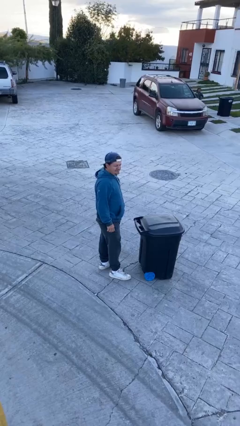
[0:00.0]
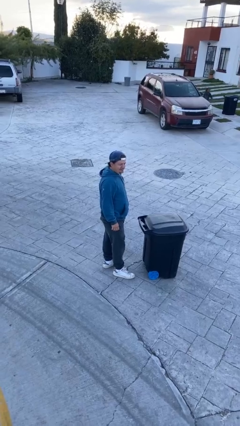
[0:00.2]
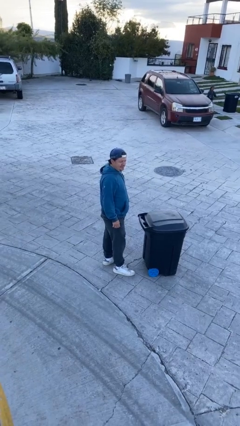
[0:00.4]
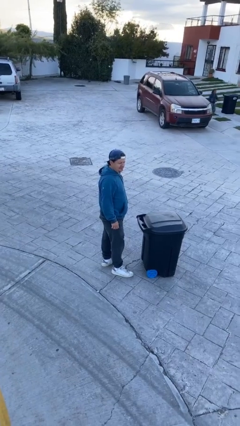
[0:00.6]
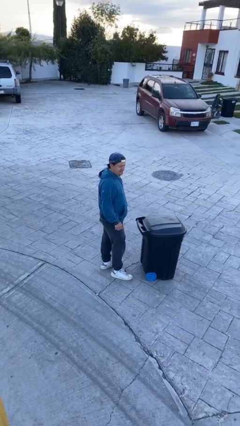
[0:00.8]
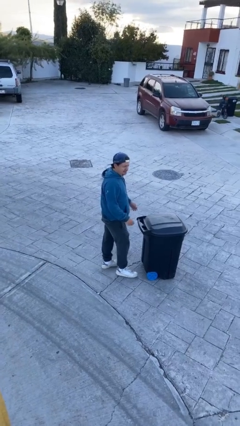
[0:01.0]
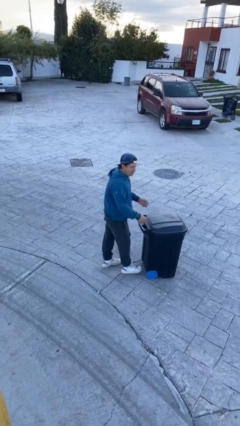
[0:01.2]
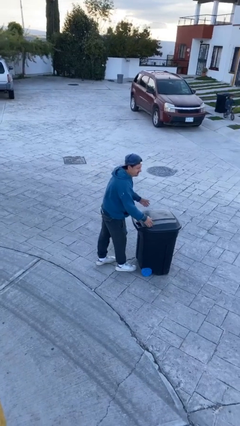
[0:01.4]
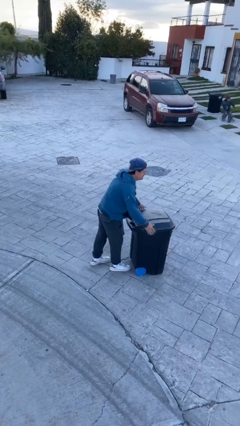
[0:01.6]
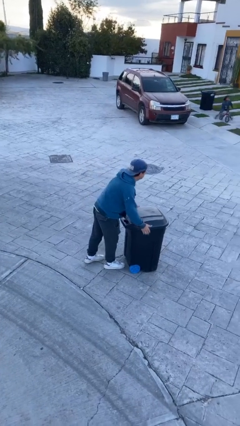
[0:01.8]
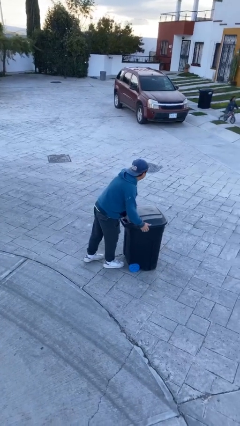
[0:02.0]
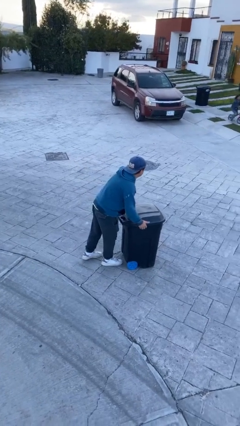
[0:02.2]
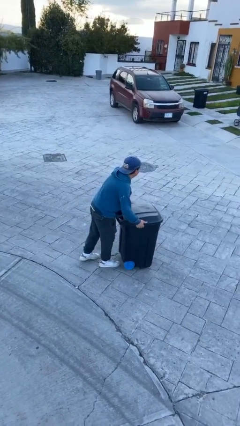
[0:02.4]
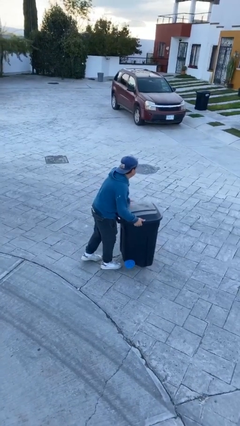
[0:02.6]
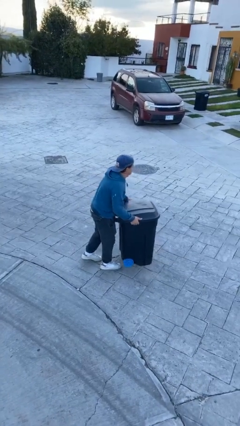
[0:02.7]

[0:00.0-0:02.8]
person picks up object from floor

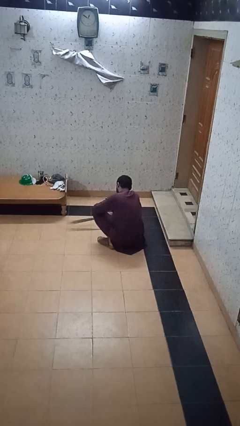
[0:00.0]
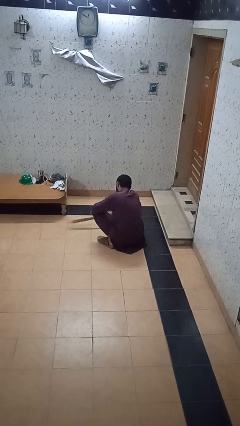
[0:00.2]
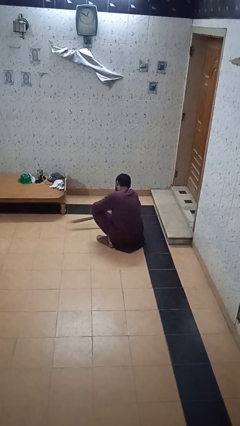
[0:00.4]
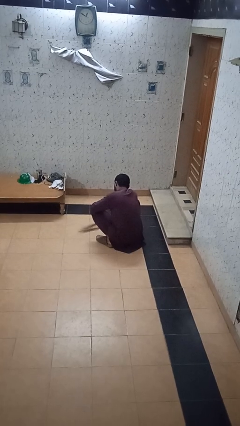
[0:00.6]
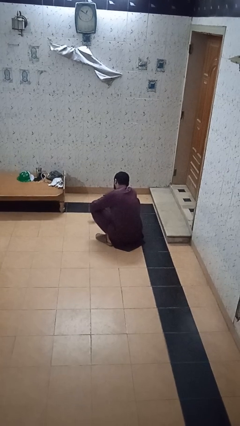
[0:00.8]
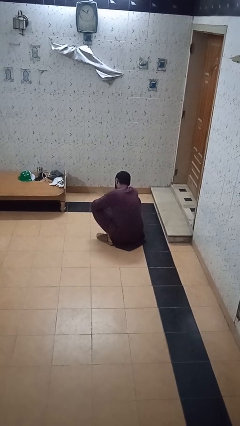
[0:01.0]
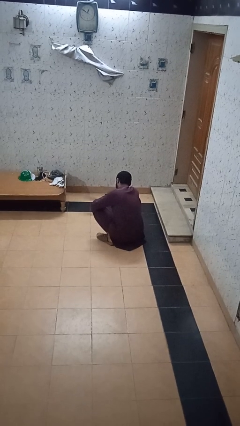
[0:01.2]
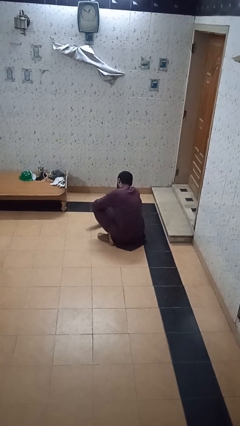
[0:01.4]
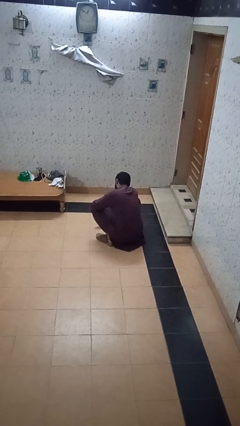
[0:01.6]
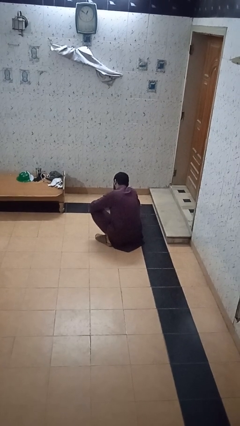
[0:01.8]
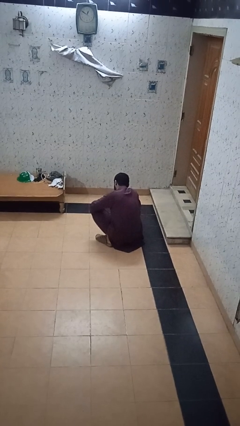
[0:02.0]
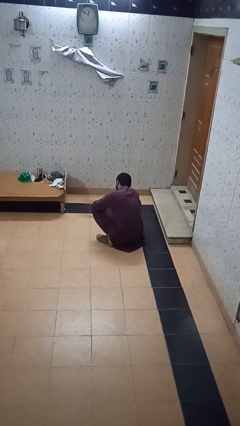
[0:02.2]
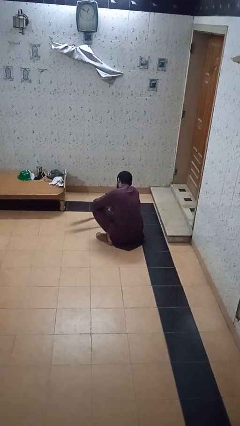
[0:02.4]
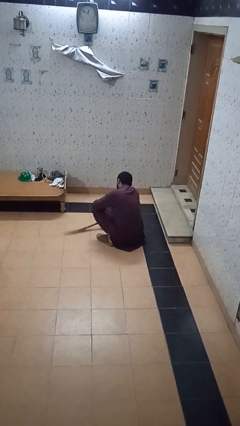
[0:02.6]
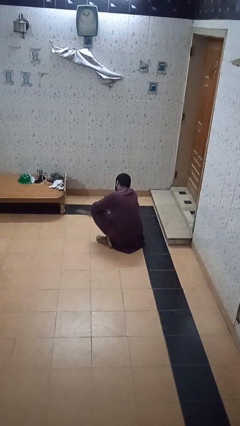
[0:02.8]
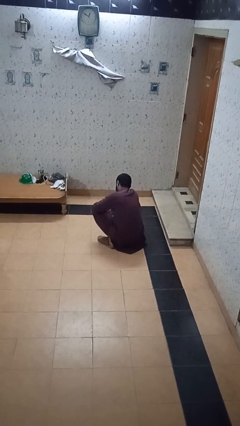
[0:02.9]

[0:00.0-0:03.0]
person sweeps floor

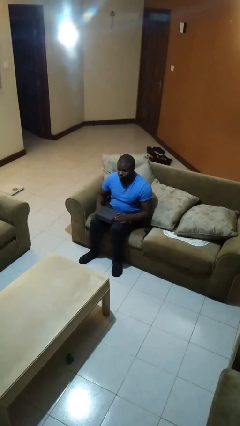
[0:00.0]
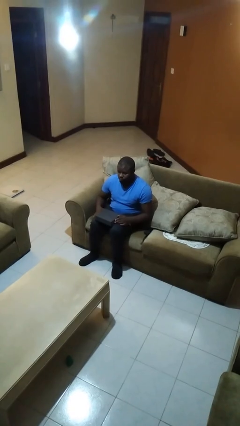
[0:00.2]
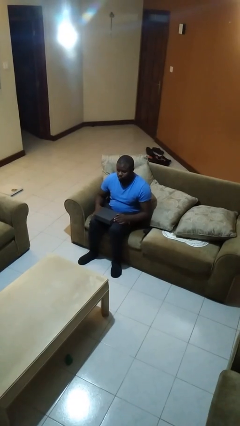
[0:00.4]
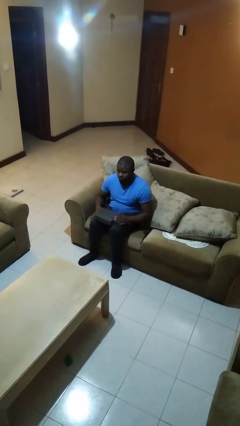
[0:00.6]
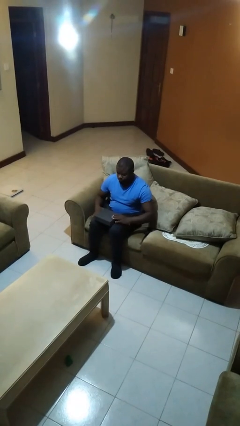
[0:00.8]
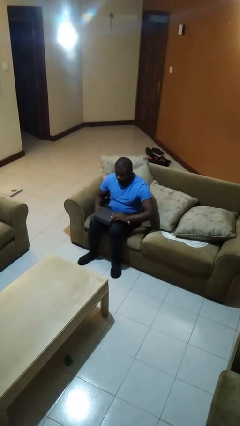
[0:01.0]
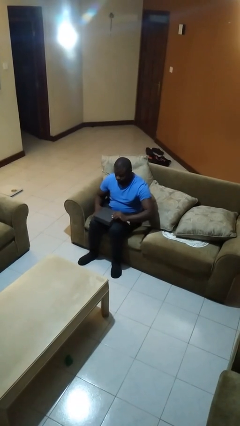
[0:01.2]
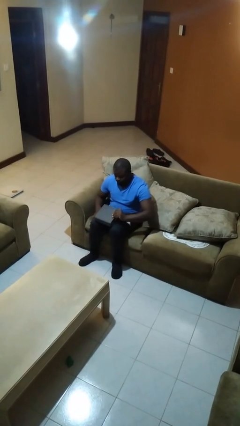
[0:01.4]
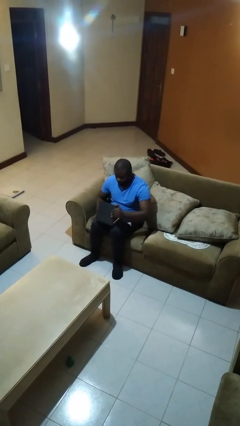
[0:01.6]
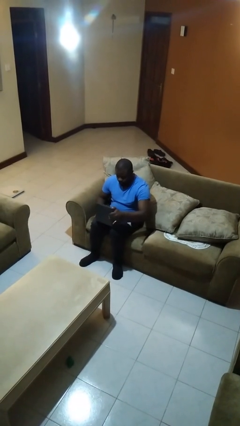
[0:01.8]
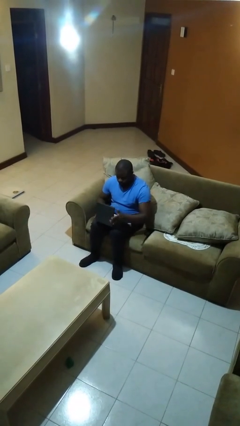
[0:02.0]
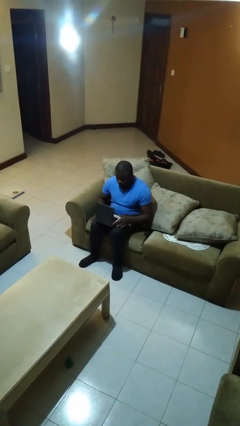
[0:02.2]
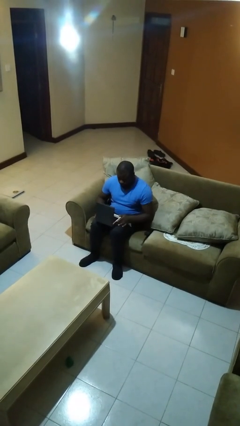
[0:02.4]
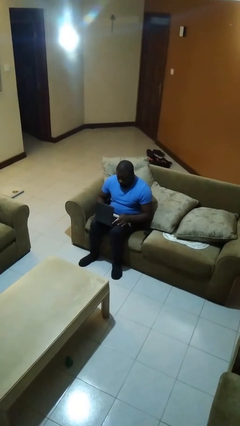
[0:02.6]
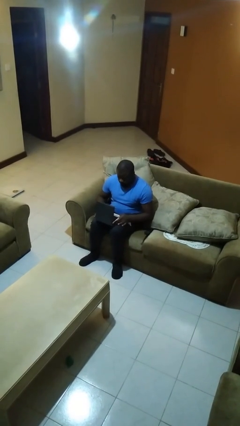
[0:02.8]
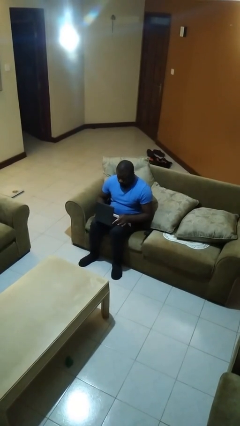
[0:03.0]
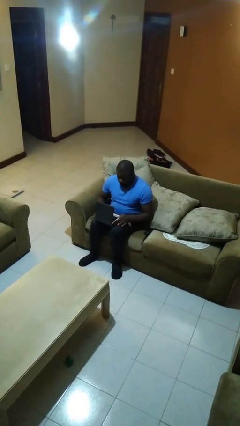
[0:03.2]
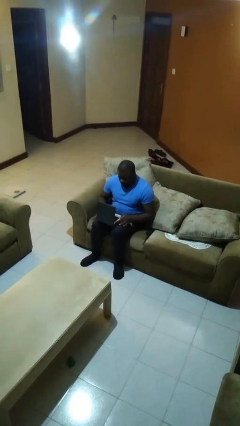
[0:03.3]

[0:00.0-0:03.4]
person opens jewelry box

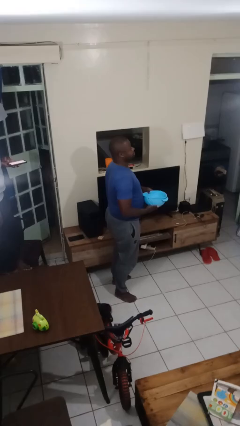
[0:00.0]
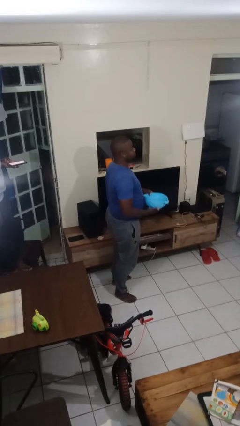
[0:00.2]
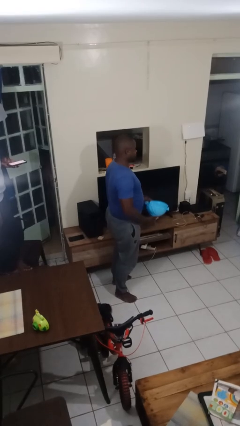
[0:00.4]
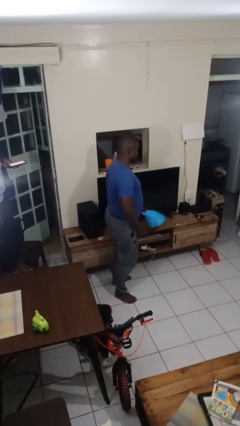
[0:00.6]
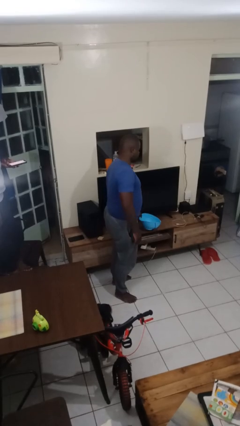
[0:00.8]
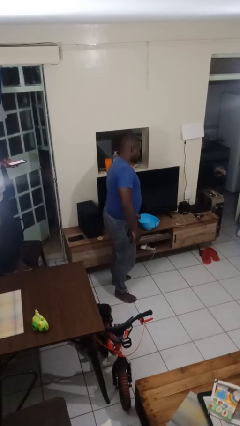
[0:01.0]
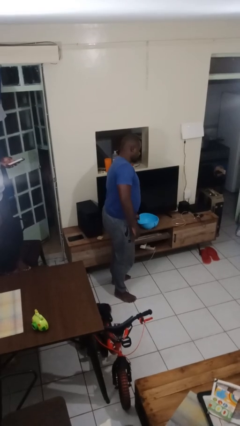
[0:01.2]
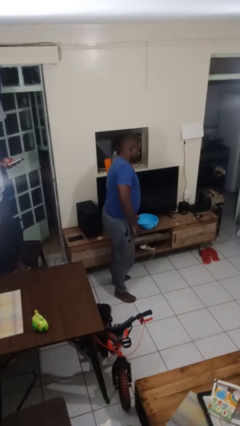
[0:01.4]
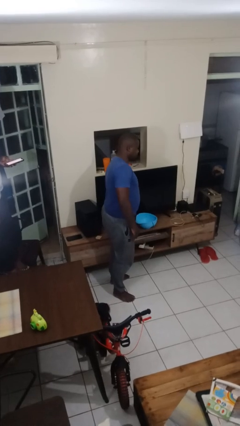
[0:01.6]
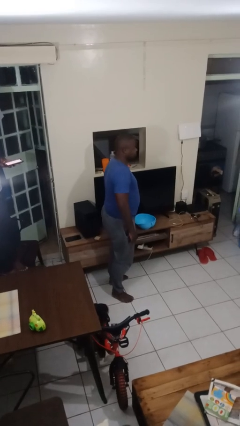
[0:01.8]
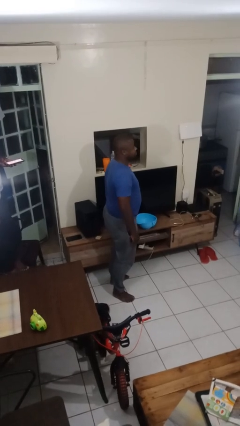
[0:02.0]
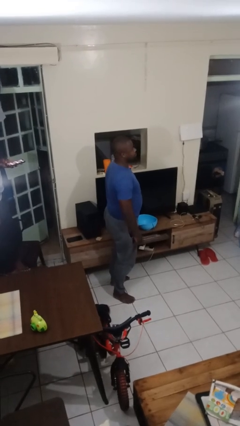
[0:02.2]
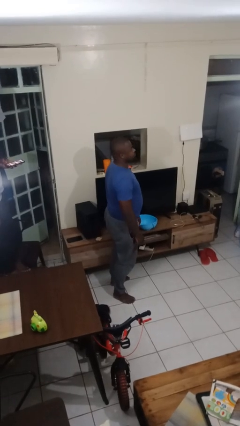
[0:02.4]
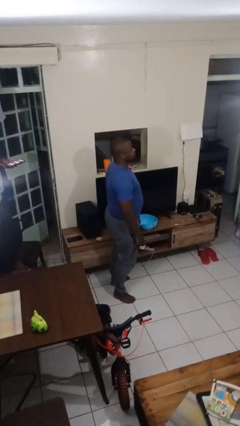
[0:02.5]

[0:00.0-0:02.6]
person puts down object on countertop

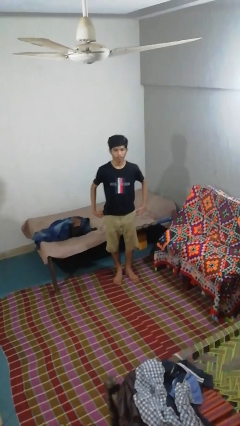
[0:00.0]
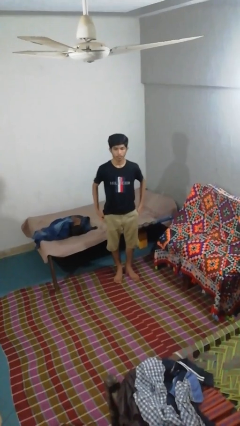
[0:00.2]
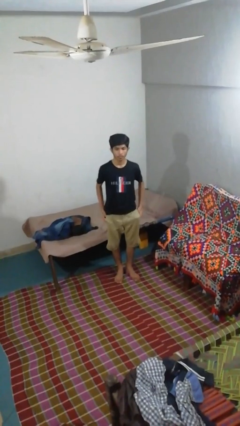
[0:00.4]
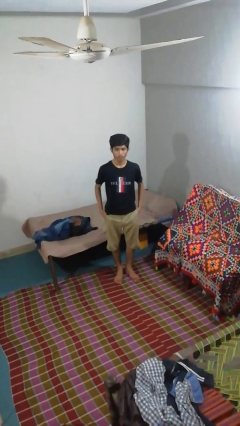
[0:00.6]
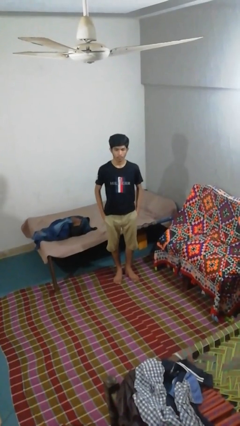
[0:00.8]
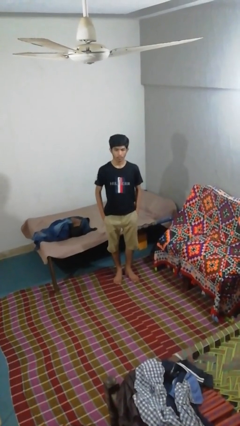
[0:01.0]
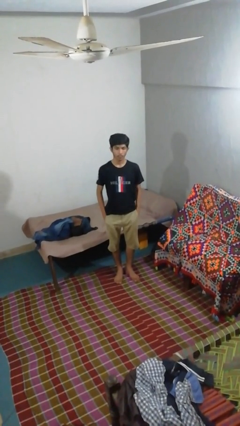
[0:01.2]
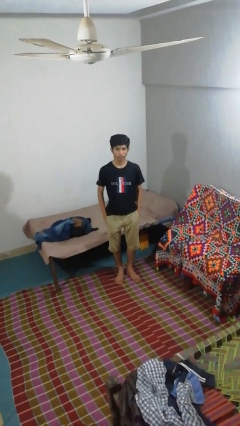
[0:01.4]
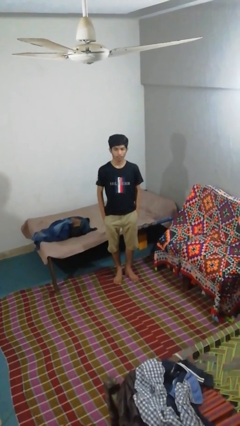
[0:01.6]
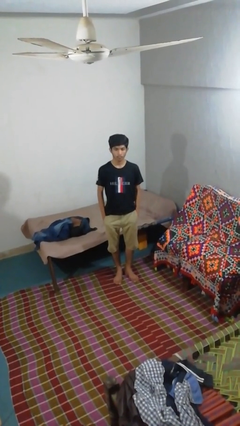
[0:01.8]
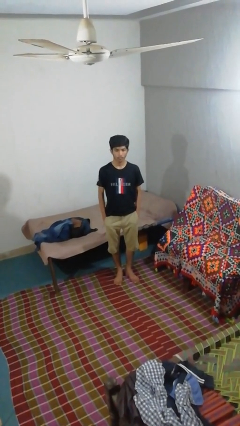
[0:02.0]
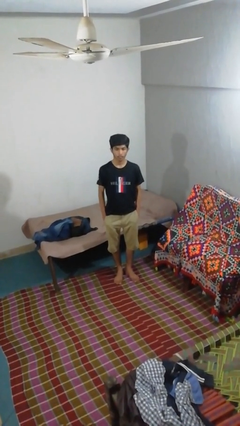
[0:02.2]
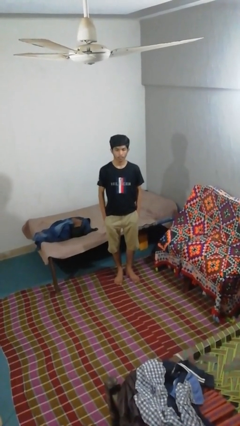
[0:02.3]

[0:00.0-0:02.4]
person puts hands in back pockets

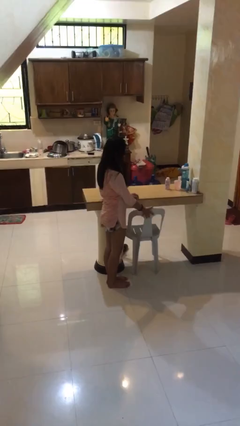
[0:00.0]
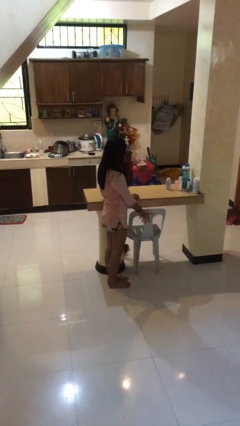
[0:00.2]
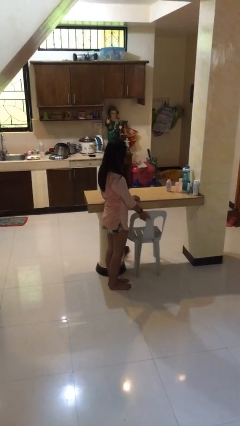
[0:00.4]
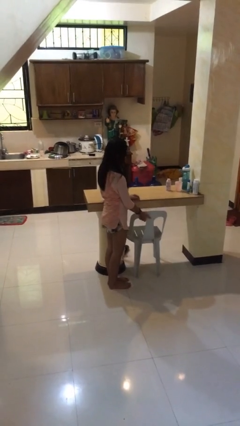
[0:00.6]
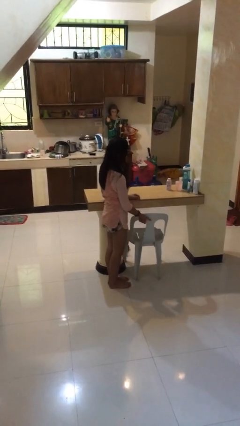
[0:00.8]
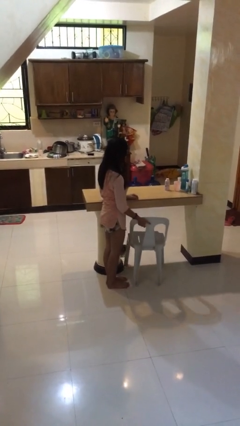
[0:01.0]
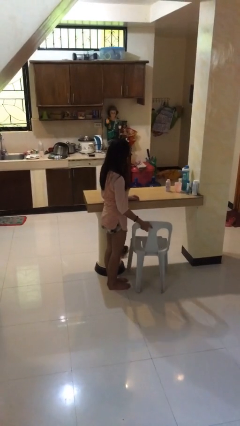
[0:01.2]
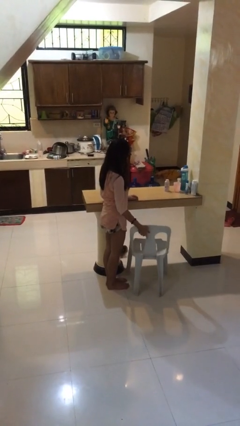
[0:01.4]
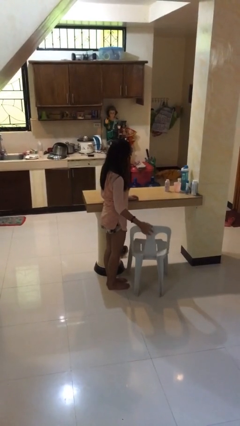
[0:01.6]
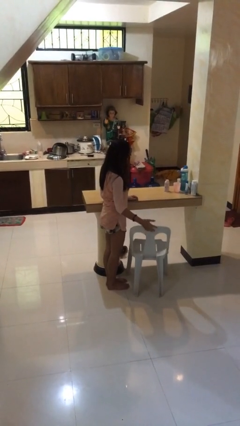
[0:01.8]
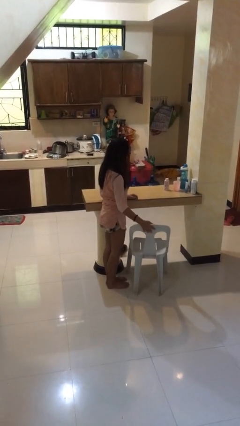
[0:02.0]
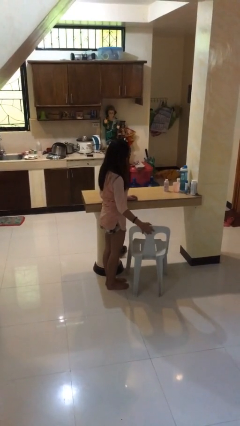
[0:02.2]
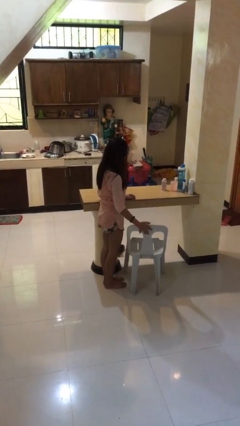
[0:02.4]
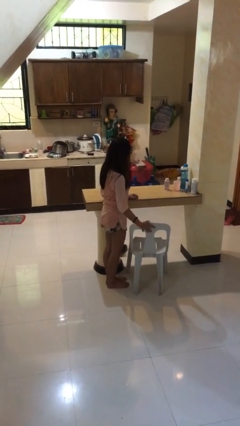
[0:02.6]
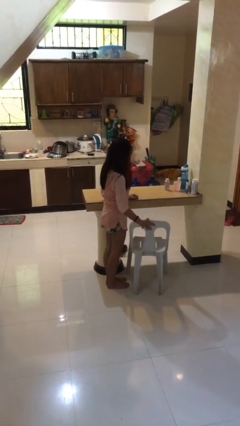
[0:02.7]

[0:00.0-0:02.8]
person pulls out chair
